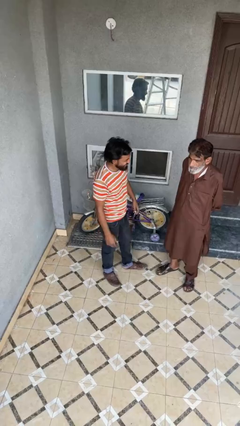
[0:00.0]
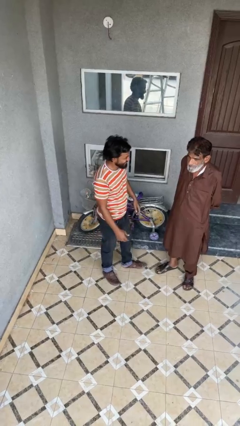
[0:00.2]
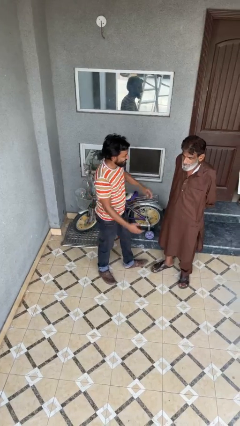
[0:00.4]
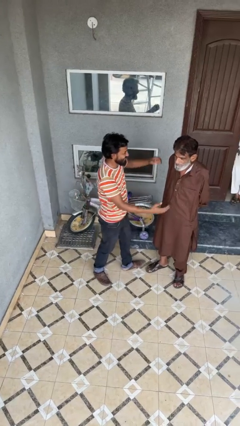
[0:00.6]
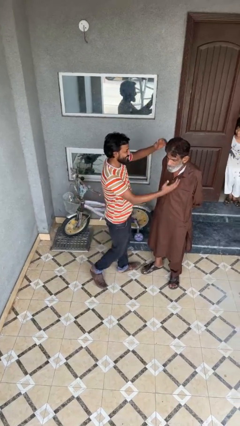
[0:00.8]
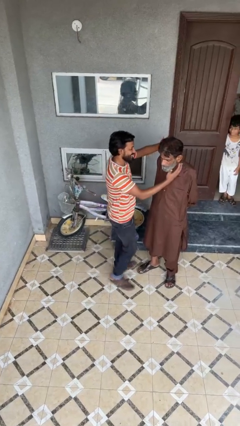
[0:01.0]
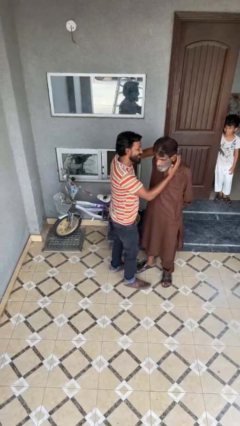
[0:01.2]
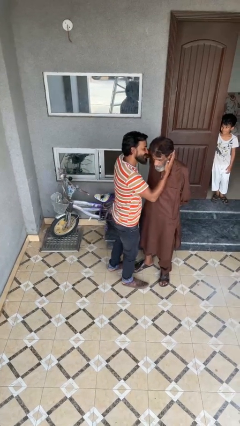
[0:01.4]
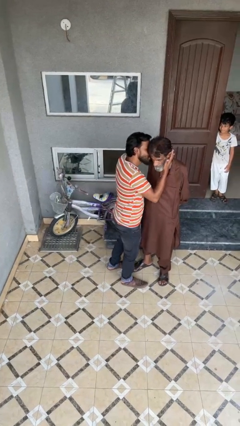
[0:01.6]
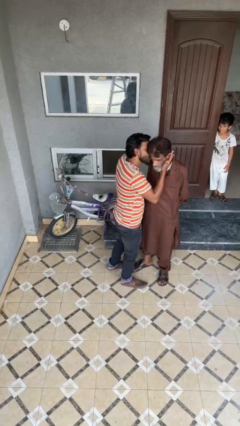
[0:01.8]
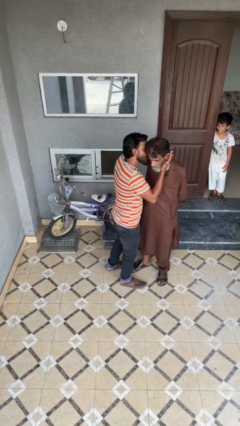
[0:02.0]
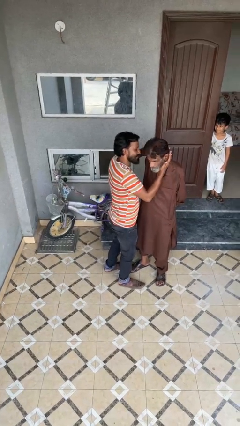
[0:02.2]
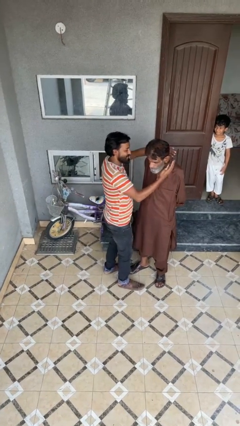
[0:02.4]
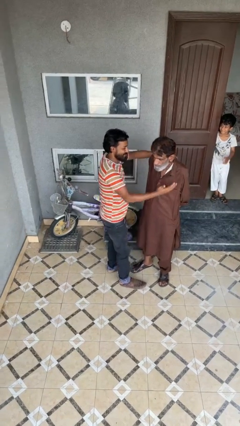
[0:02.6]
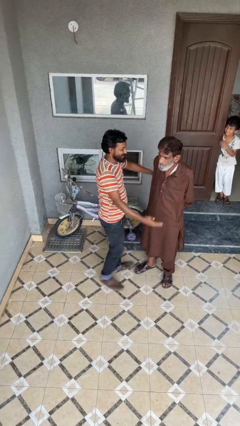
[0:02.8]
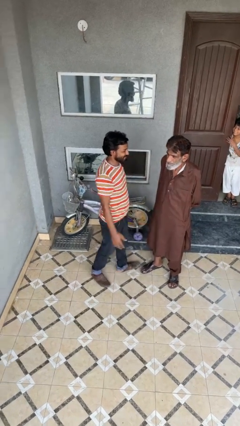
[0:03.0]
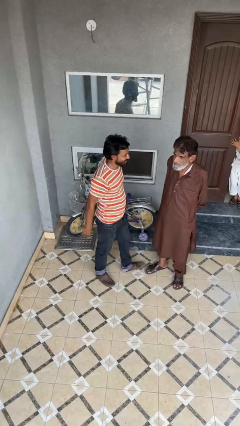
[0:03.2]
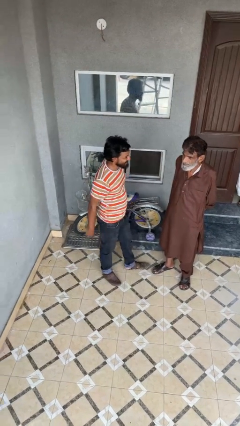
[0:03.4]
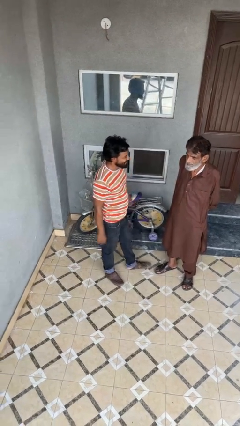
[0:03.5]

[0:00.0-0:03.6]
person kisses cheek of person

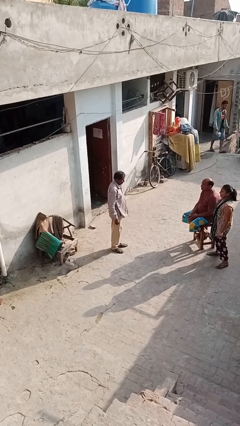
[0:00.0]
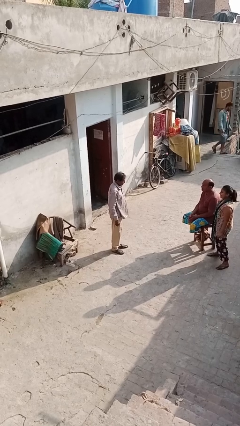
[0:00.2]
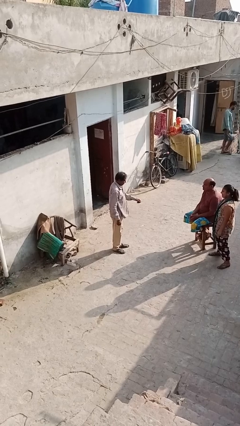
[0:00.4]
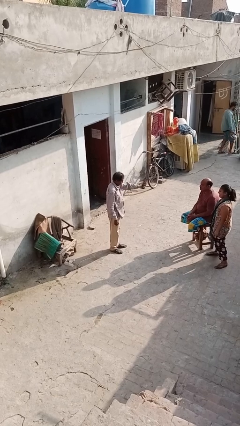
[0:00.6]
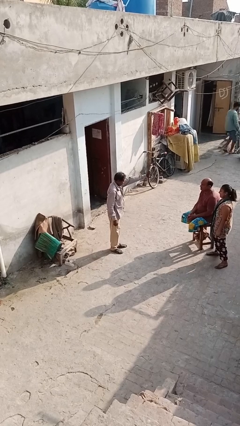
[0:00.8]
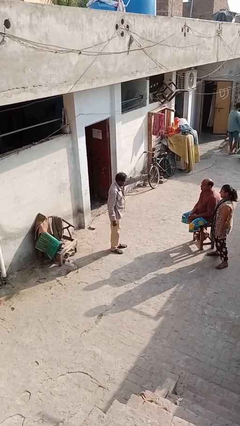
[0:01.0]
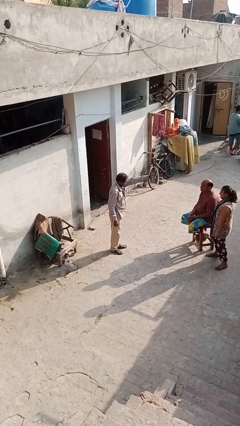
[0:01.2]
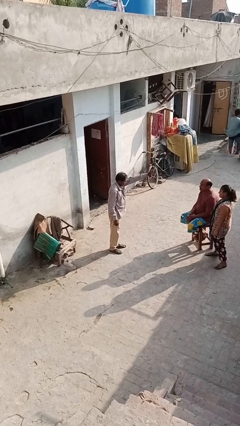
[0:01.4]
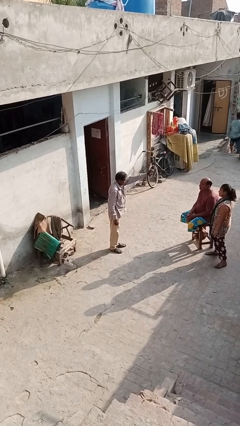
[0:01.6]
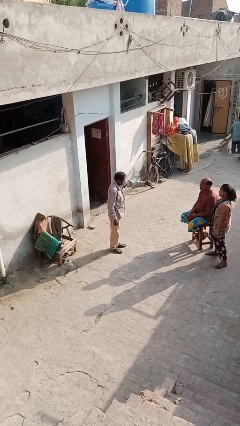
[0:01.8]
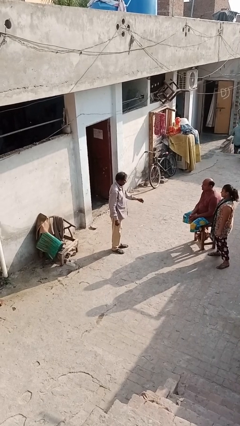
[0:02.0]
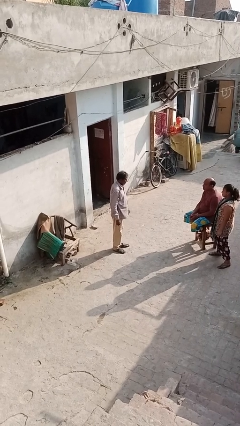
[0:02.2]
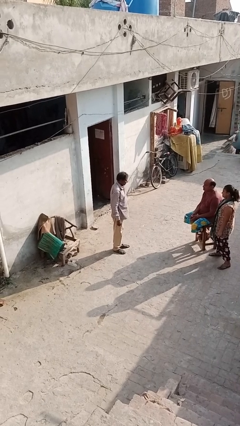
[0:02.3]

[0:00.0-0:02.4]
person waves at person

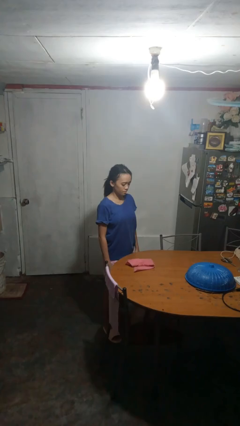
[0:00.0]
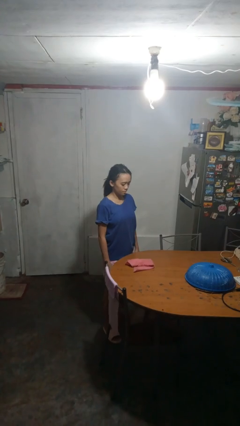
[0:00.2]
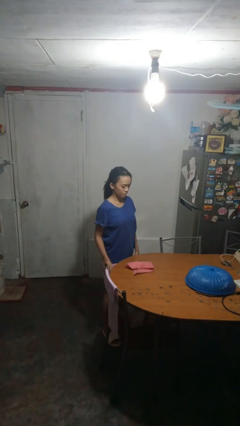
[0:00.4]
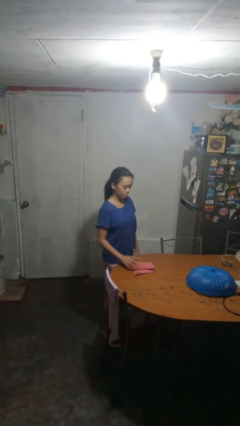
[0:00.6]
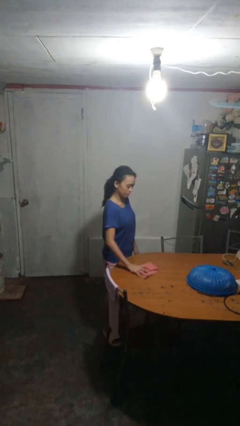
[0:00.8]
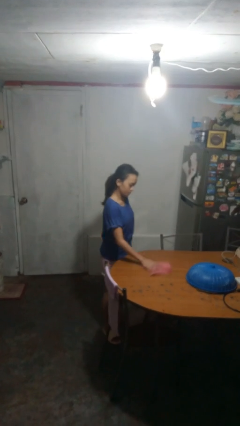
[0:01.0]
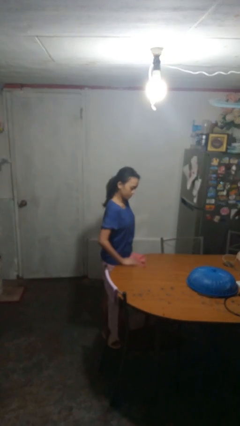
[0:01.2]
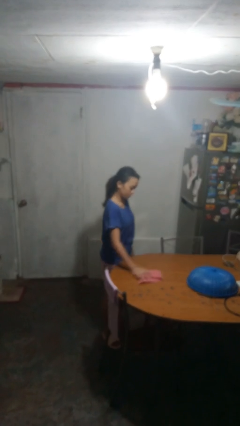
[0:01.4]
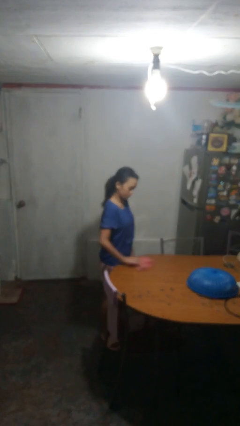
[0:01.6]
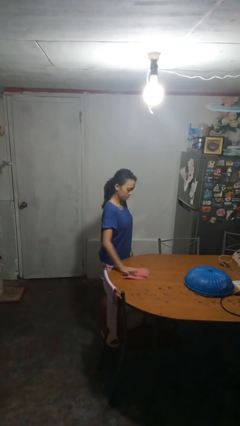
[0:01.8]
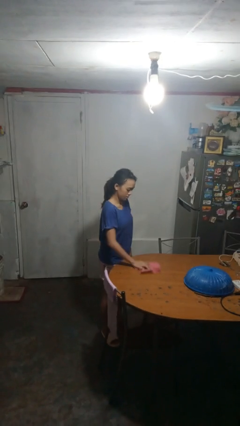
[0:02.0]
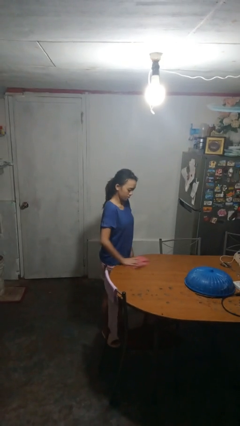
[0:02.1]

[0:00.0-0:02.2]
person cleans table with rag

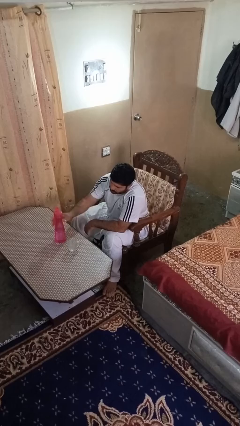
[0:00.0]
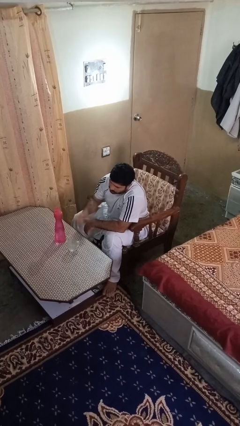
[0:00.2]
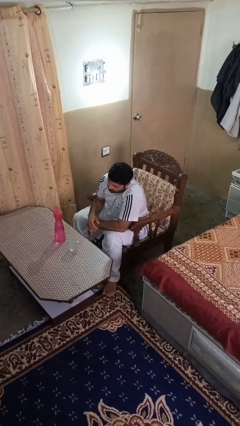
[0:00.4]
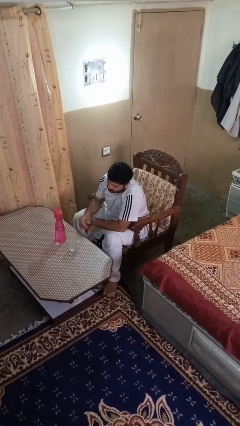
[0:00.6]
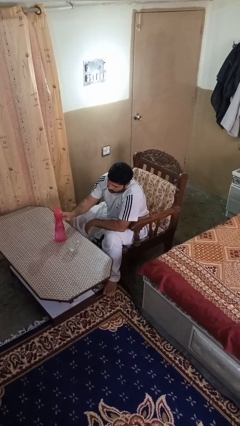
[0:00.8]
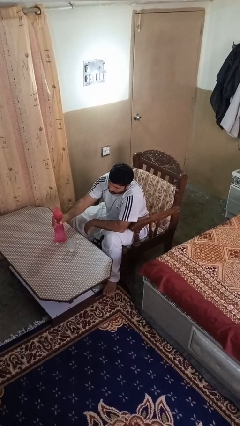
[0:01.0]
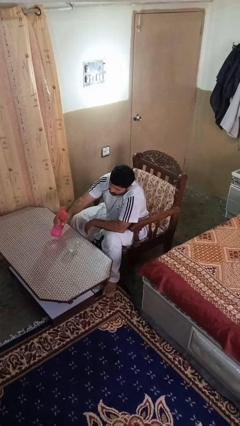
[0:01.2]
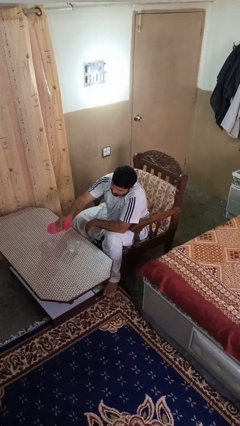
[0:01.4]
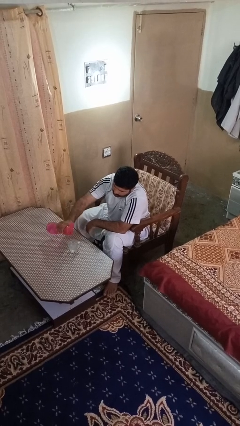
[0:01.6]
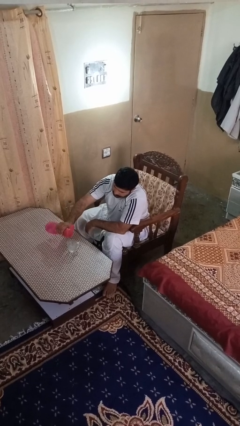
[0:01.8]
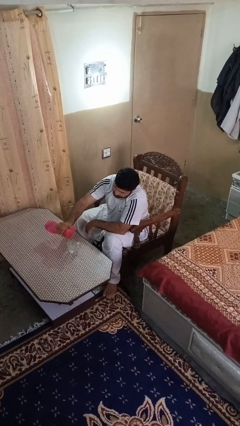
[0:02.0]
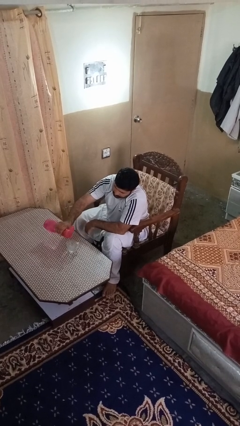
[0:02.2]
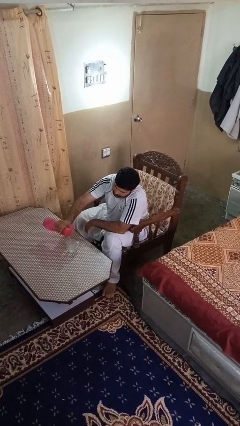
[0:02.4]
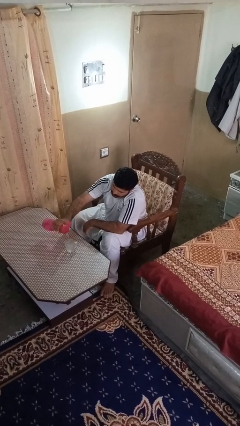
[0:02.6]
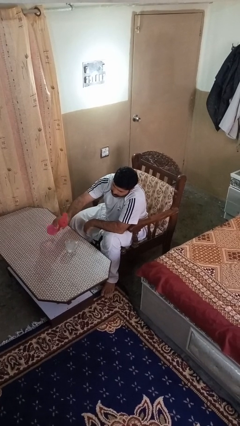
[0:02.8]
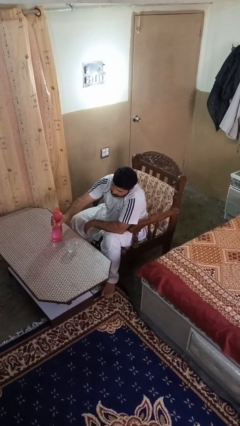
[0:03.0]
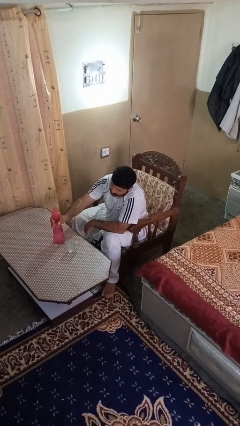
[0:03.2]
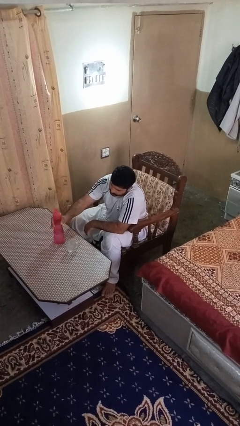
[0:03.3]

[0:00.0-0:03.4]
person pours liquid into cup

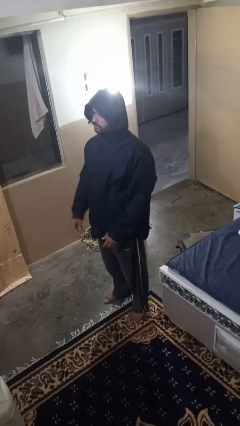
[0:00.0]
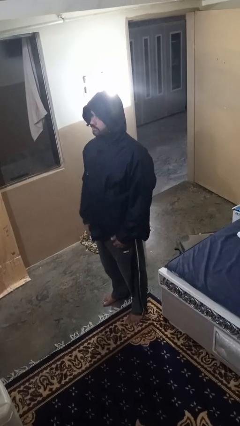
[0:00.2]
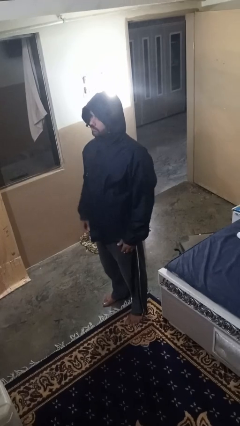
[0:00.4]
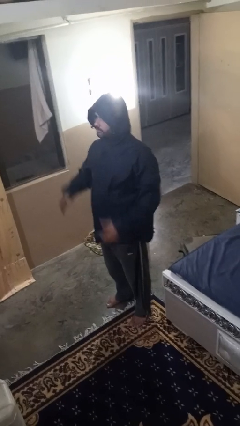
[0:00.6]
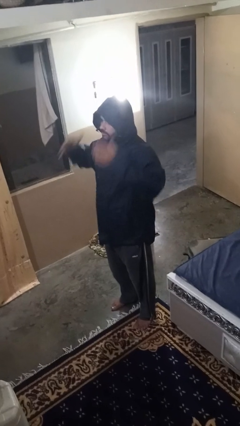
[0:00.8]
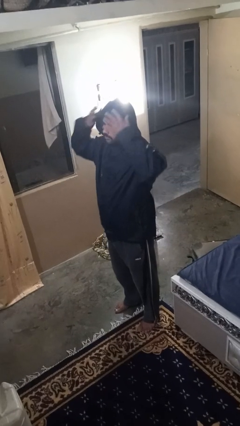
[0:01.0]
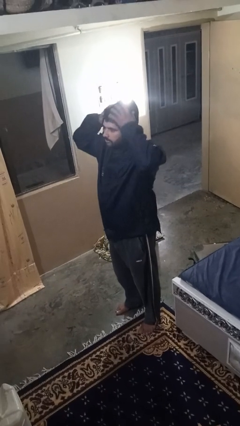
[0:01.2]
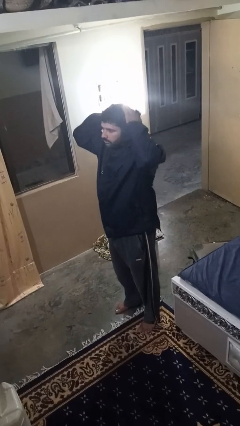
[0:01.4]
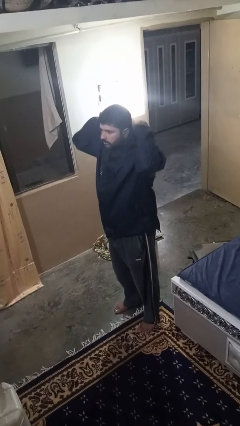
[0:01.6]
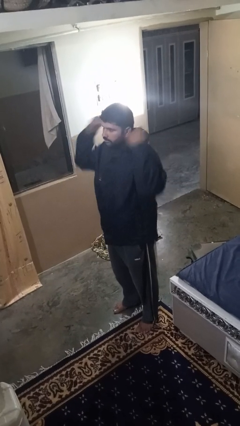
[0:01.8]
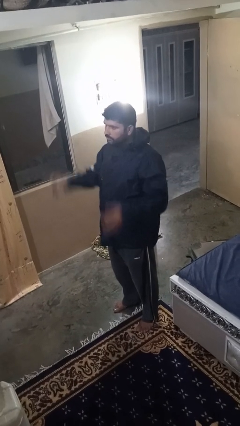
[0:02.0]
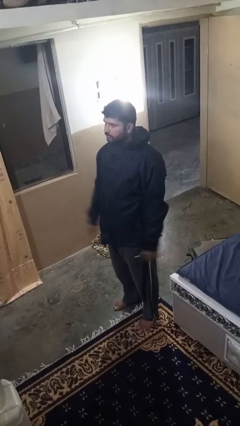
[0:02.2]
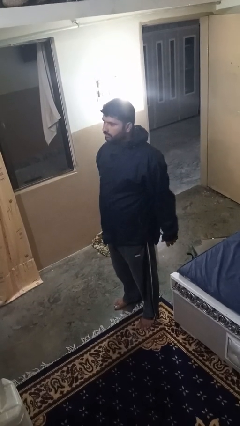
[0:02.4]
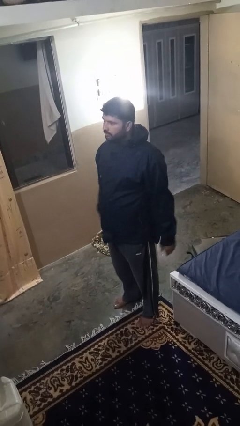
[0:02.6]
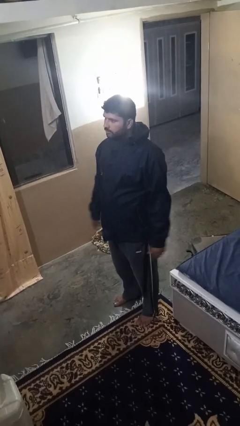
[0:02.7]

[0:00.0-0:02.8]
person takes off hoodie

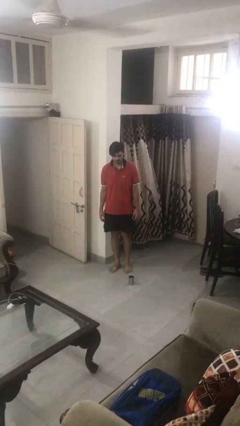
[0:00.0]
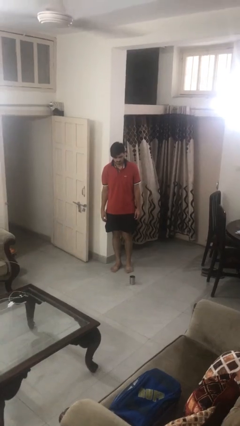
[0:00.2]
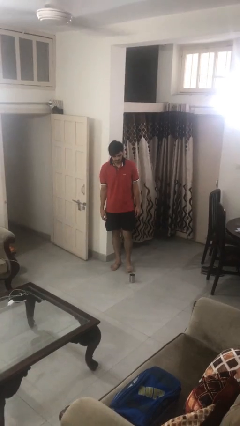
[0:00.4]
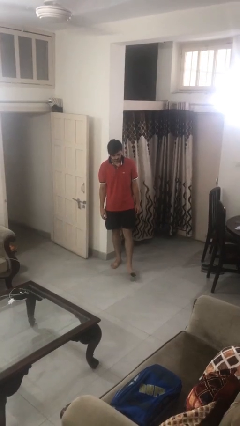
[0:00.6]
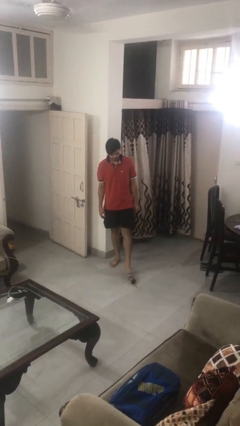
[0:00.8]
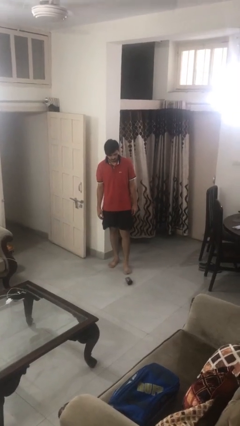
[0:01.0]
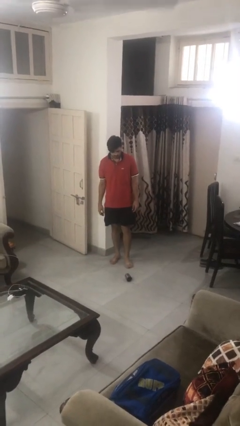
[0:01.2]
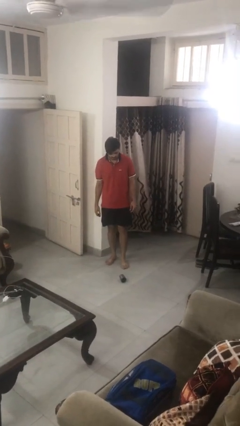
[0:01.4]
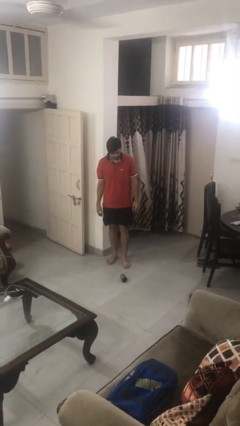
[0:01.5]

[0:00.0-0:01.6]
person spills on floor

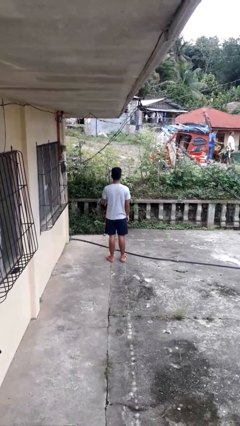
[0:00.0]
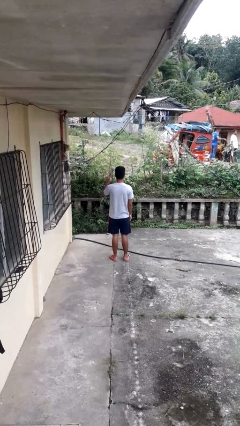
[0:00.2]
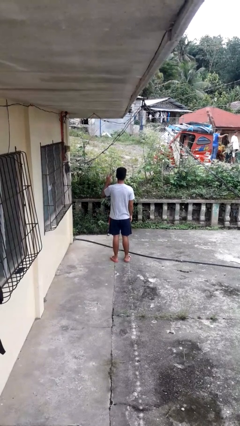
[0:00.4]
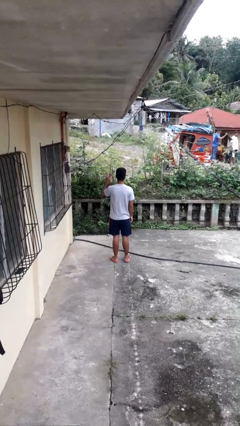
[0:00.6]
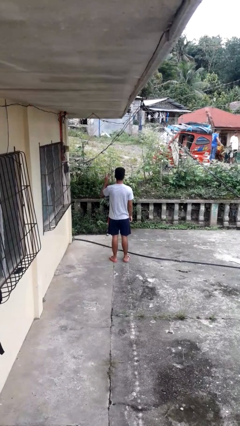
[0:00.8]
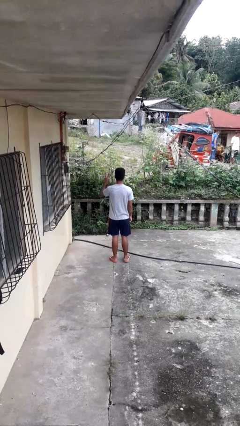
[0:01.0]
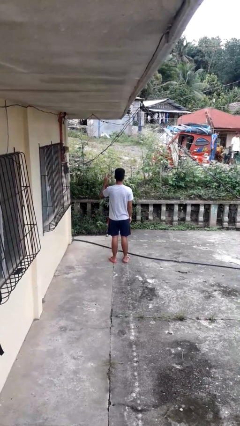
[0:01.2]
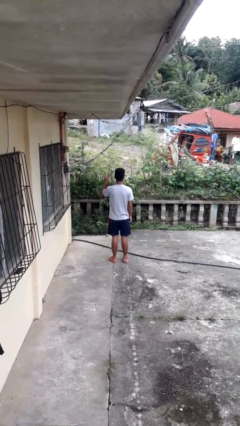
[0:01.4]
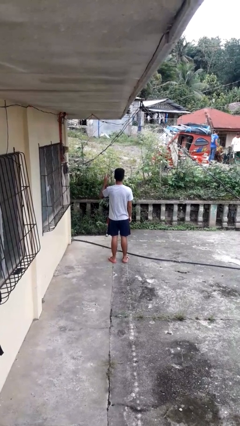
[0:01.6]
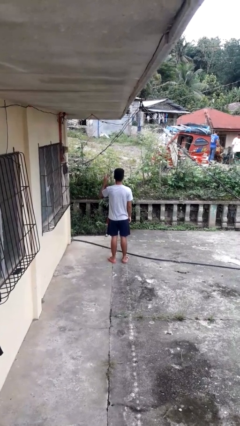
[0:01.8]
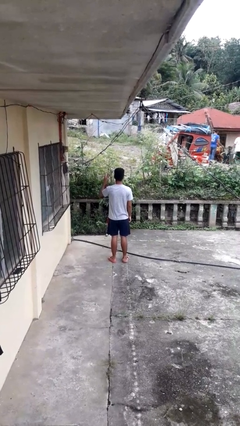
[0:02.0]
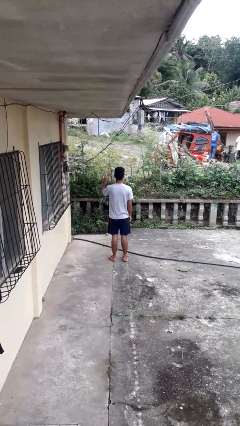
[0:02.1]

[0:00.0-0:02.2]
person gestures peace
